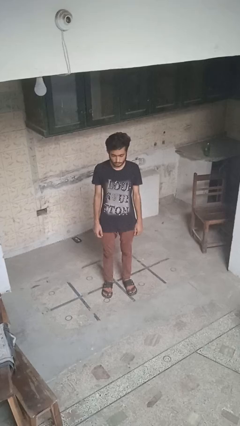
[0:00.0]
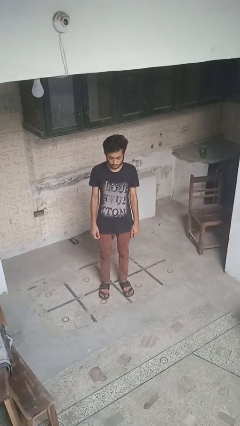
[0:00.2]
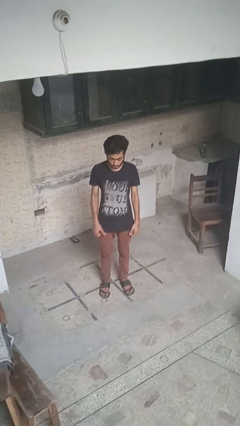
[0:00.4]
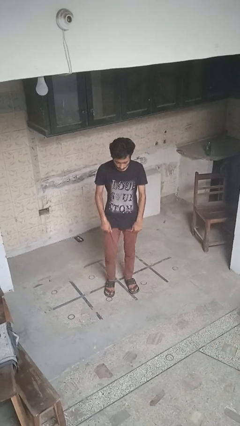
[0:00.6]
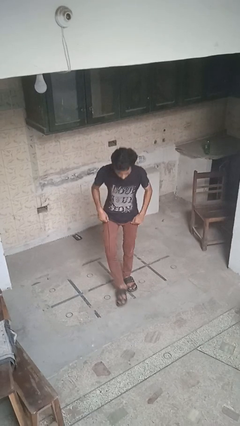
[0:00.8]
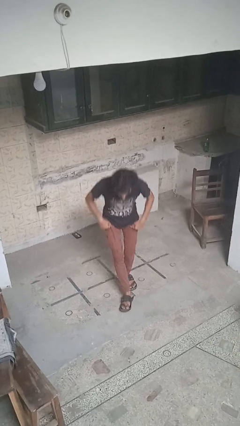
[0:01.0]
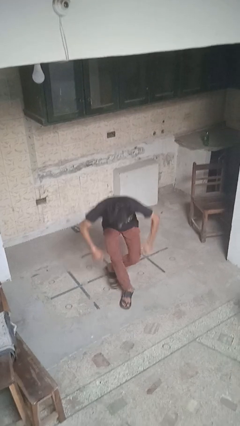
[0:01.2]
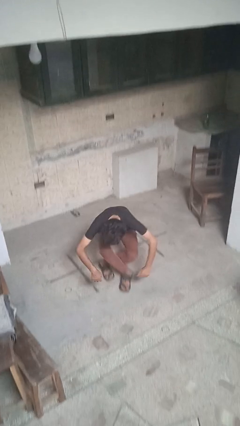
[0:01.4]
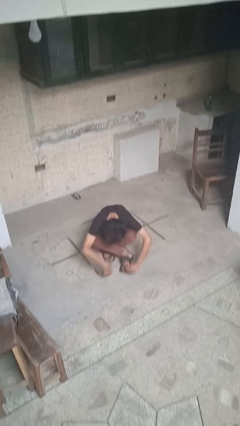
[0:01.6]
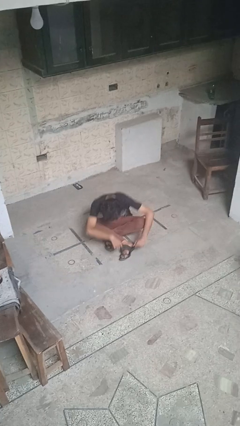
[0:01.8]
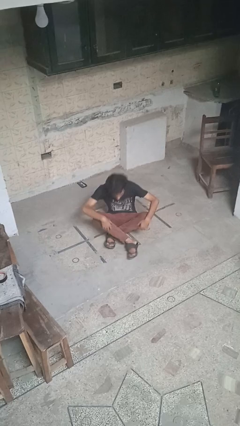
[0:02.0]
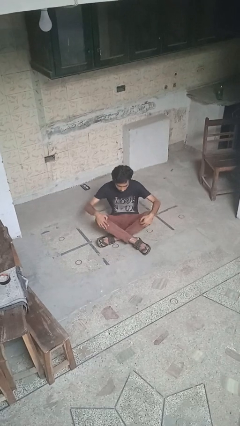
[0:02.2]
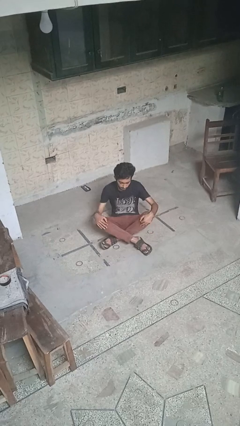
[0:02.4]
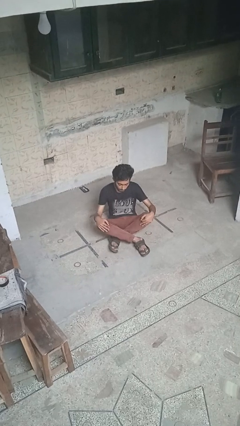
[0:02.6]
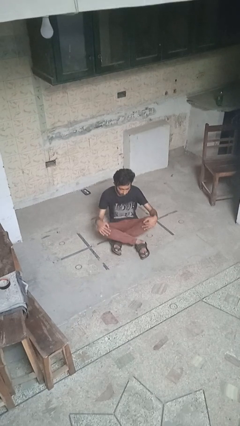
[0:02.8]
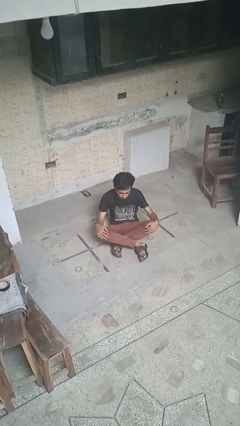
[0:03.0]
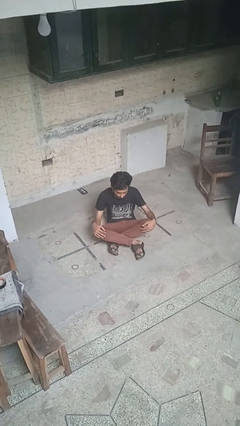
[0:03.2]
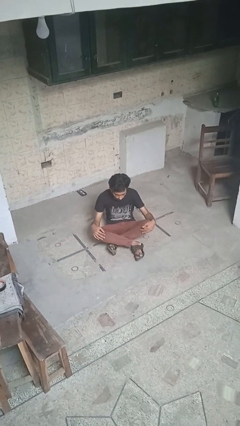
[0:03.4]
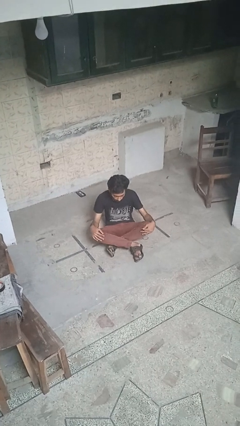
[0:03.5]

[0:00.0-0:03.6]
person sits crisscross

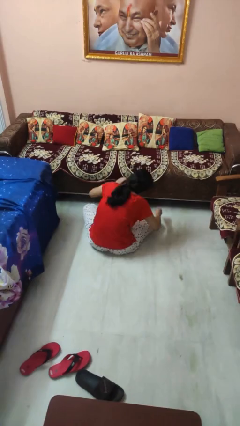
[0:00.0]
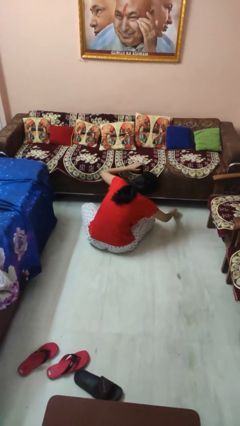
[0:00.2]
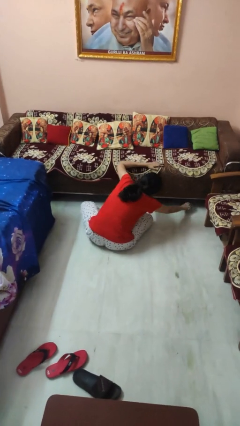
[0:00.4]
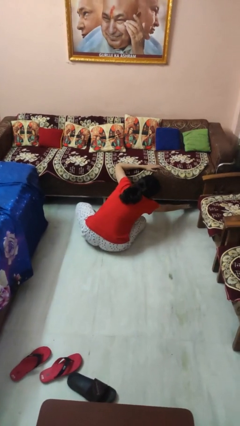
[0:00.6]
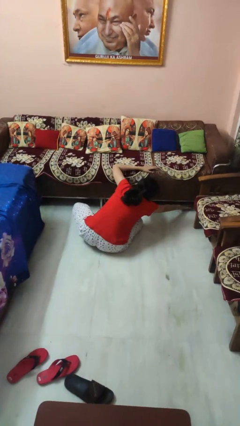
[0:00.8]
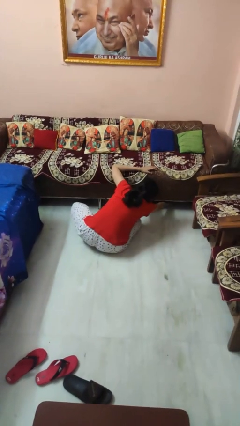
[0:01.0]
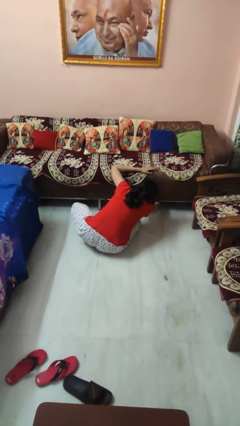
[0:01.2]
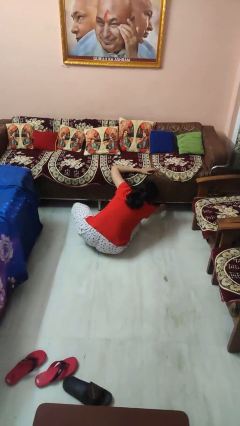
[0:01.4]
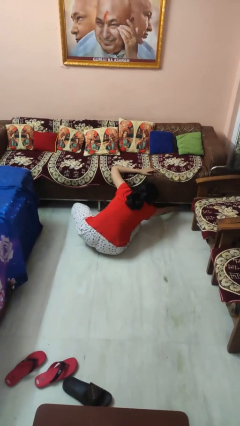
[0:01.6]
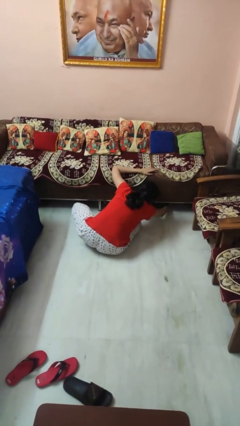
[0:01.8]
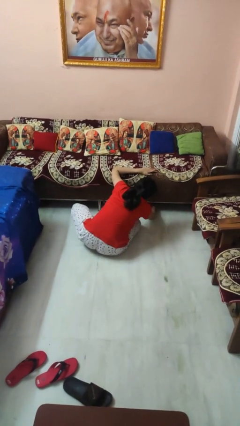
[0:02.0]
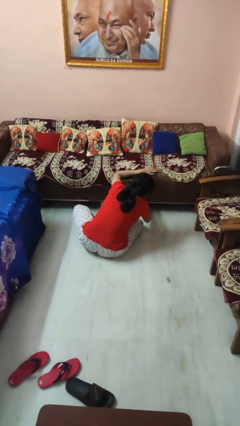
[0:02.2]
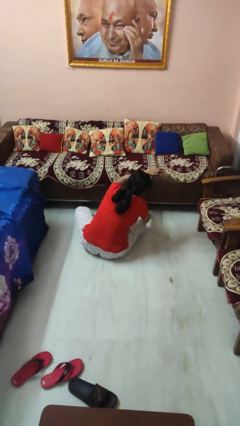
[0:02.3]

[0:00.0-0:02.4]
person searches under couch

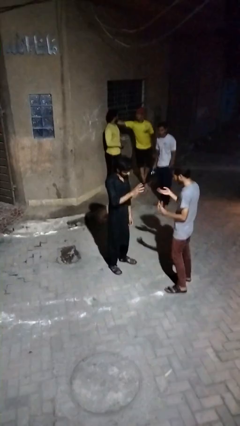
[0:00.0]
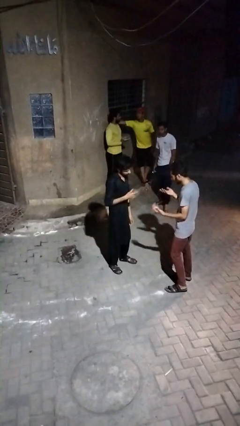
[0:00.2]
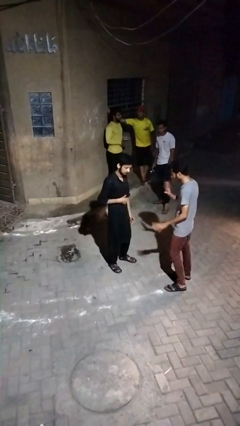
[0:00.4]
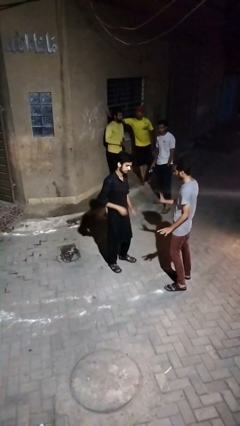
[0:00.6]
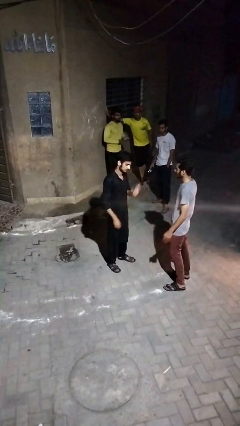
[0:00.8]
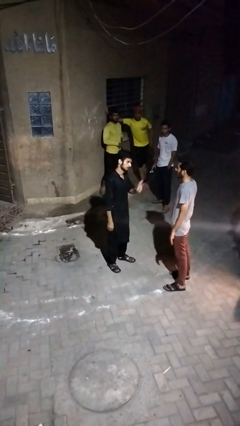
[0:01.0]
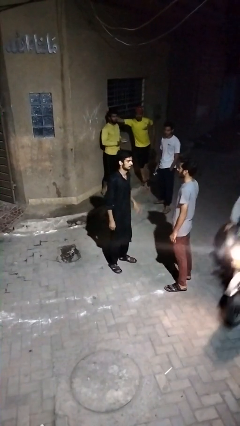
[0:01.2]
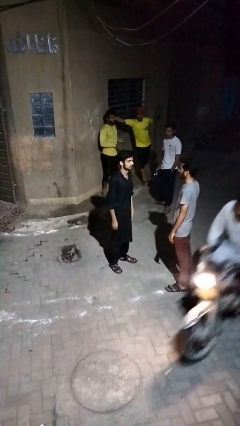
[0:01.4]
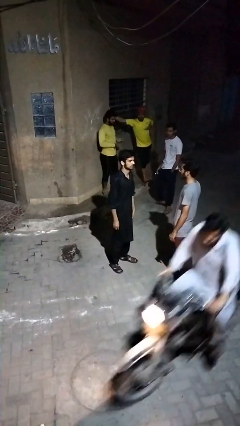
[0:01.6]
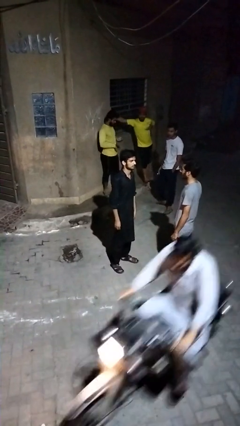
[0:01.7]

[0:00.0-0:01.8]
person talks to person

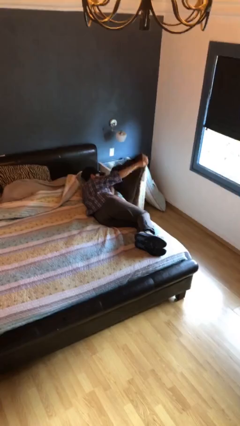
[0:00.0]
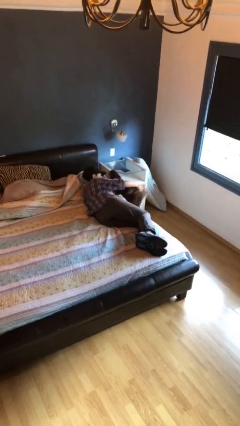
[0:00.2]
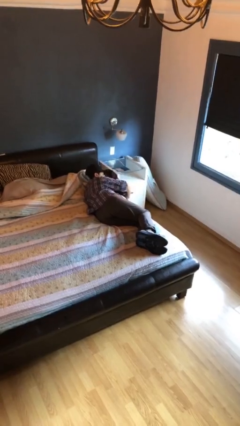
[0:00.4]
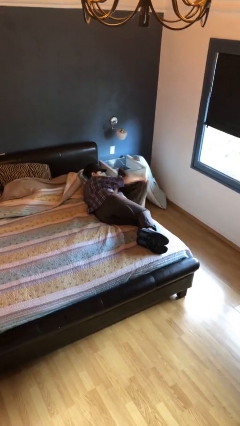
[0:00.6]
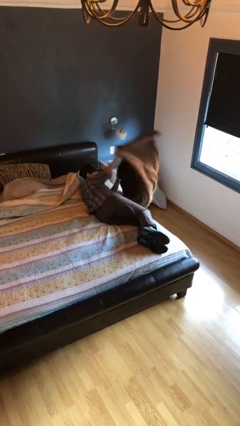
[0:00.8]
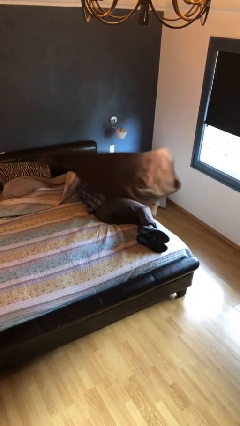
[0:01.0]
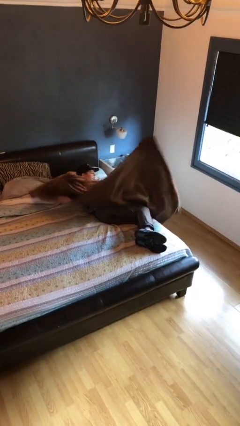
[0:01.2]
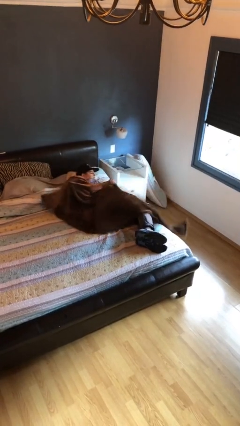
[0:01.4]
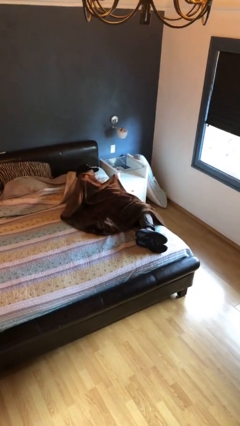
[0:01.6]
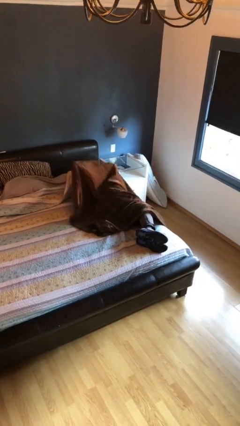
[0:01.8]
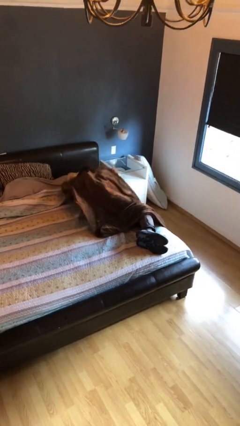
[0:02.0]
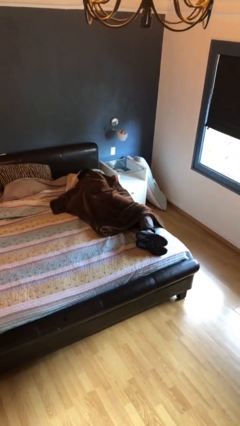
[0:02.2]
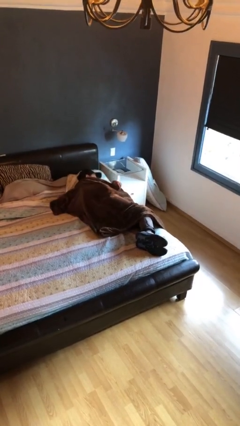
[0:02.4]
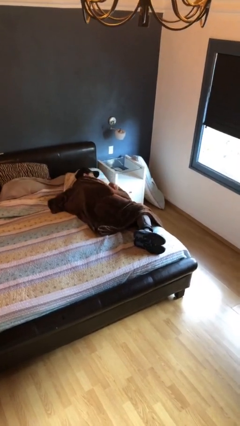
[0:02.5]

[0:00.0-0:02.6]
person covers with blanket

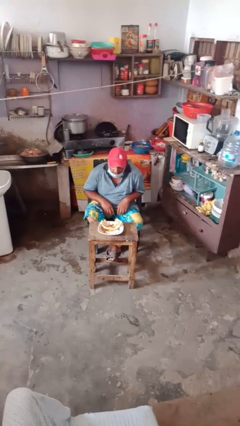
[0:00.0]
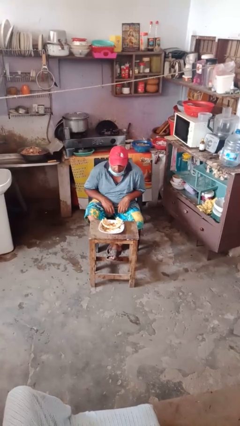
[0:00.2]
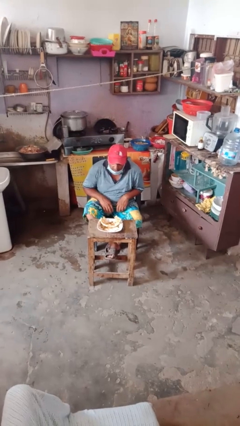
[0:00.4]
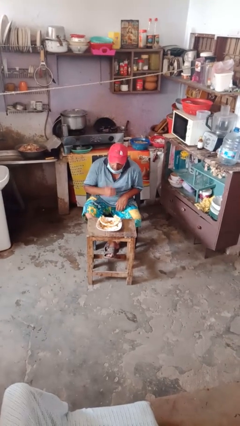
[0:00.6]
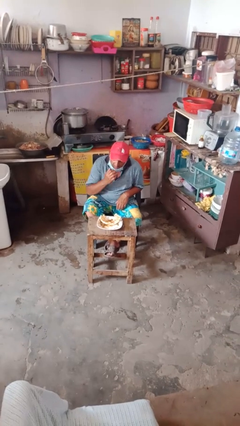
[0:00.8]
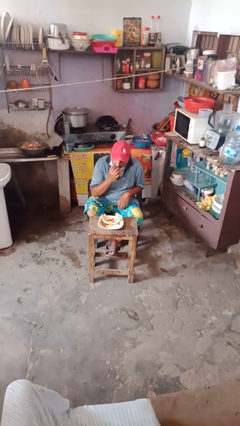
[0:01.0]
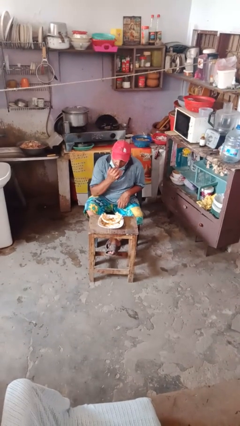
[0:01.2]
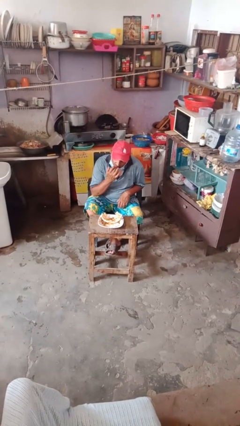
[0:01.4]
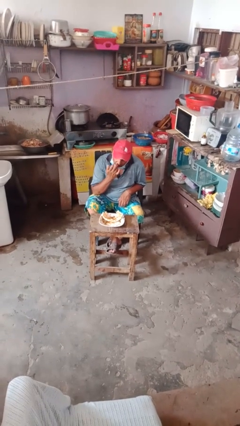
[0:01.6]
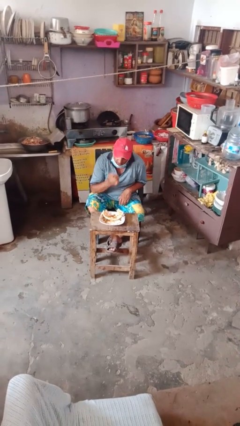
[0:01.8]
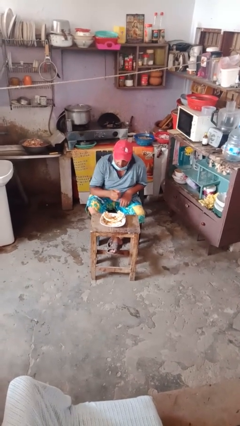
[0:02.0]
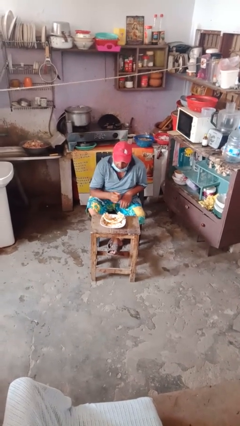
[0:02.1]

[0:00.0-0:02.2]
person licks fingers

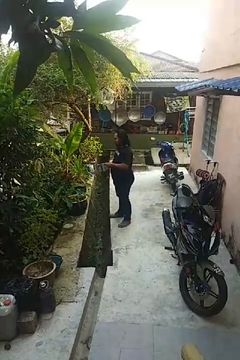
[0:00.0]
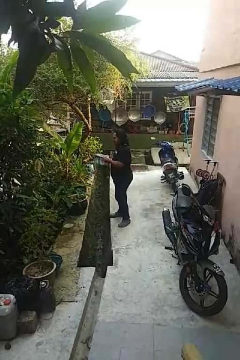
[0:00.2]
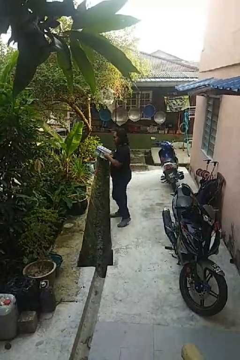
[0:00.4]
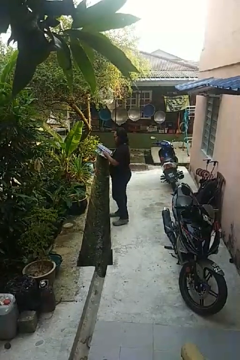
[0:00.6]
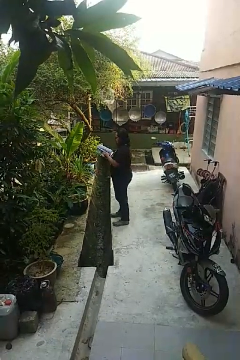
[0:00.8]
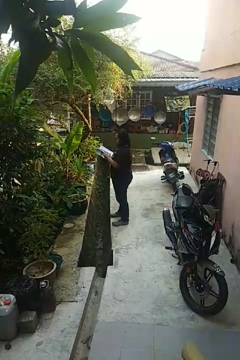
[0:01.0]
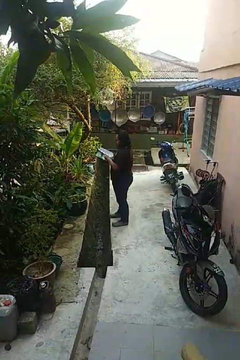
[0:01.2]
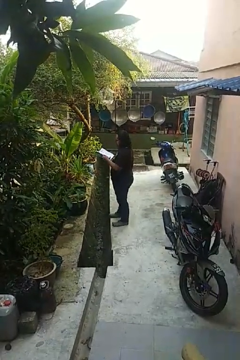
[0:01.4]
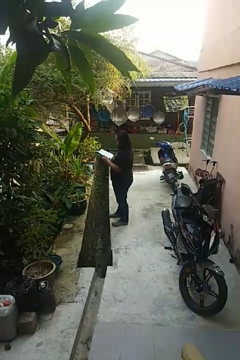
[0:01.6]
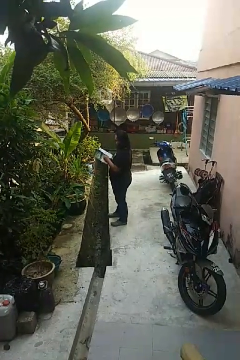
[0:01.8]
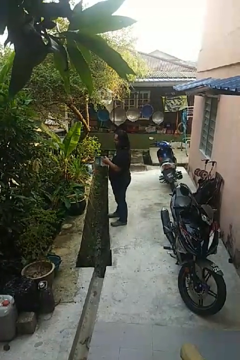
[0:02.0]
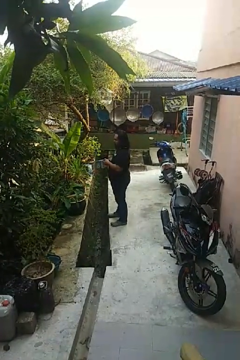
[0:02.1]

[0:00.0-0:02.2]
person reads magazine

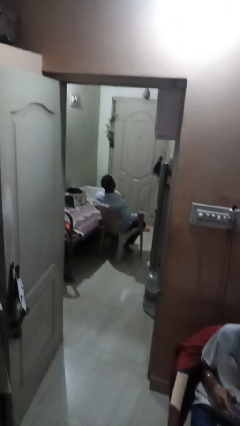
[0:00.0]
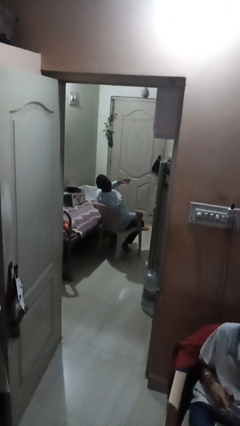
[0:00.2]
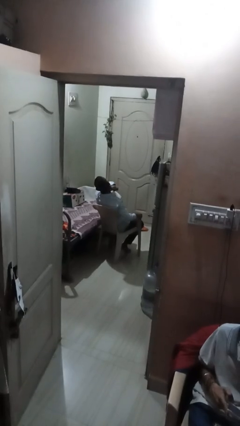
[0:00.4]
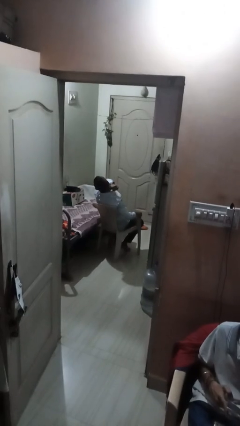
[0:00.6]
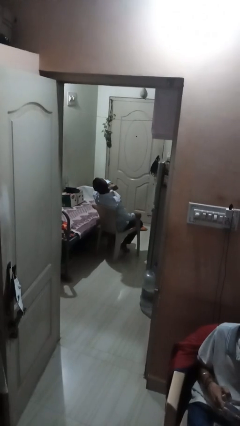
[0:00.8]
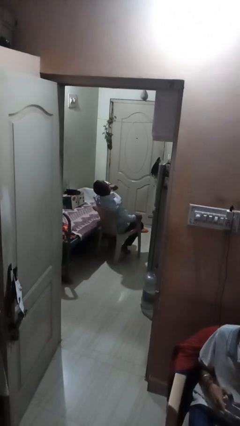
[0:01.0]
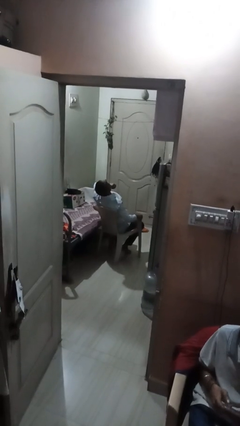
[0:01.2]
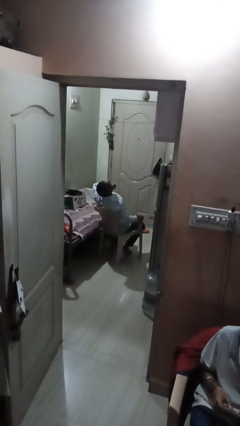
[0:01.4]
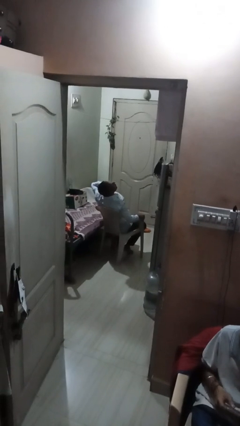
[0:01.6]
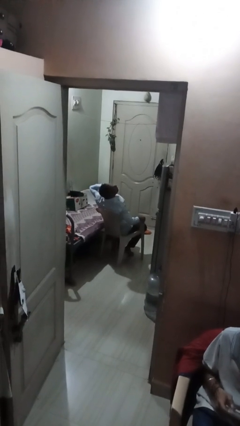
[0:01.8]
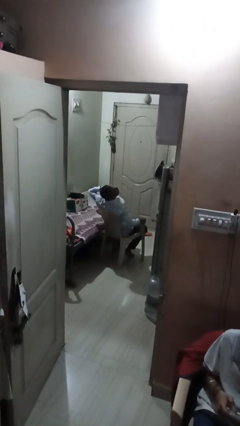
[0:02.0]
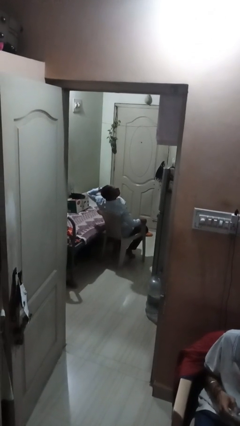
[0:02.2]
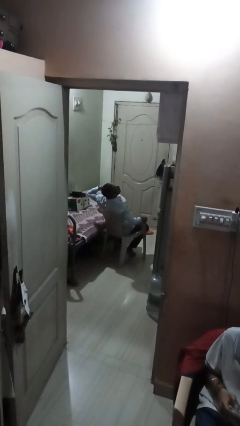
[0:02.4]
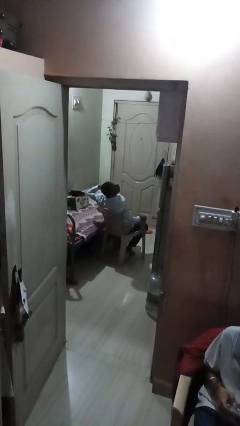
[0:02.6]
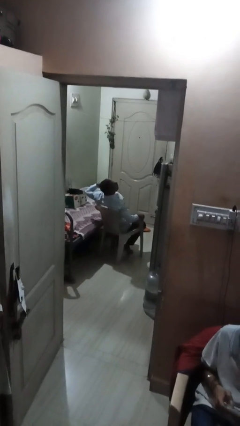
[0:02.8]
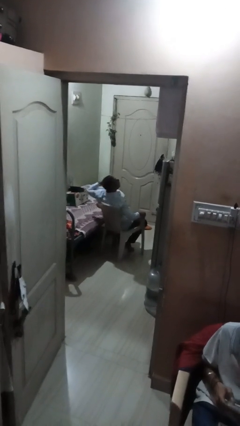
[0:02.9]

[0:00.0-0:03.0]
person gestures cut
